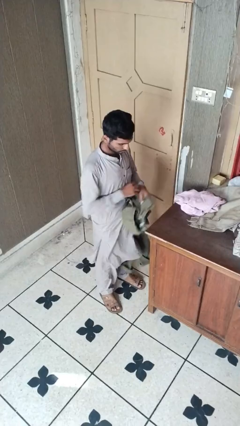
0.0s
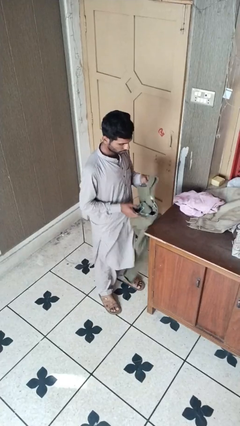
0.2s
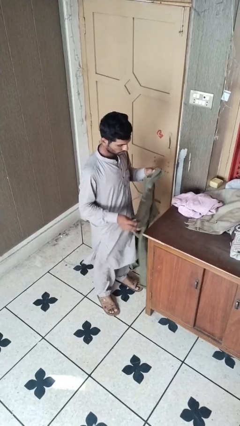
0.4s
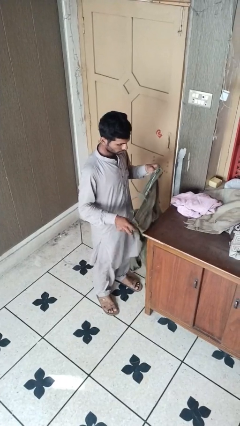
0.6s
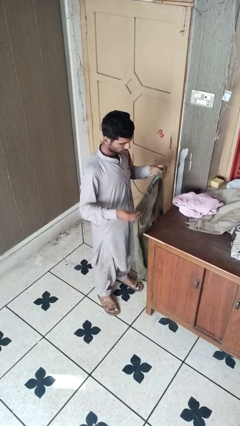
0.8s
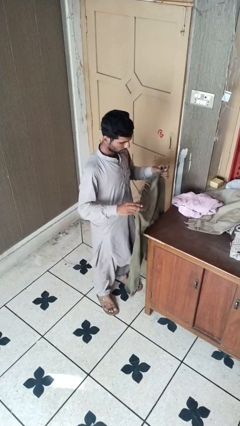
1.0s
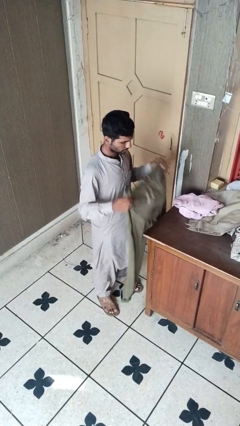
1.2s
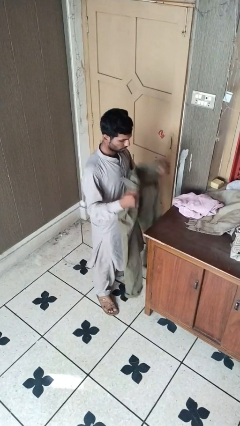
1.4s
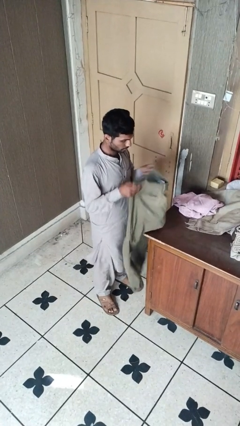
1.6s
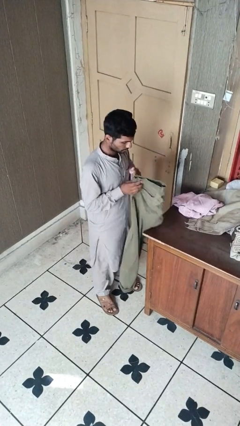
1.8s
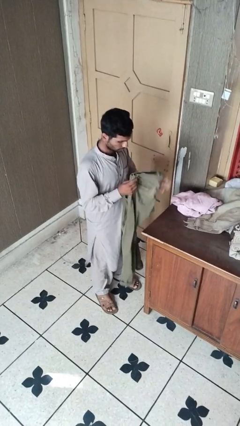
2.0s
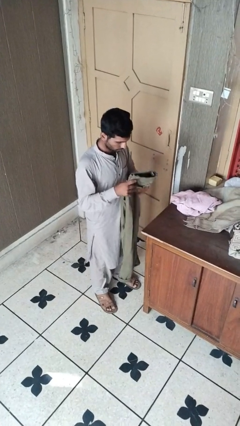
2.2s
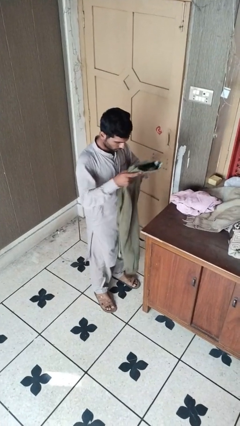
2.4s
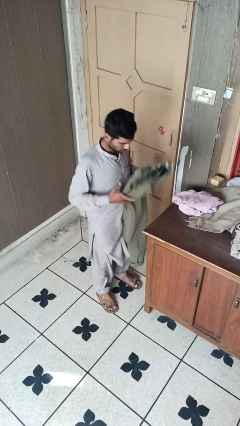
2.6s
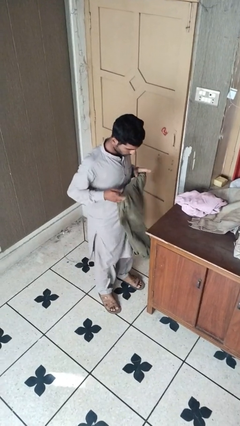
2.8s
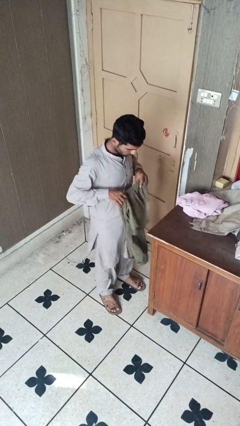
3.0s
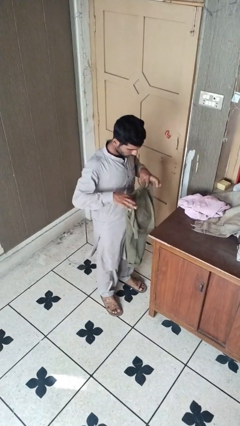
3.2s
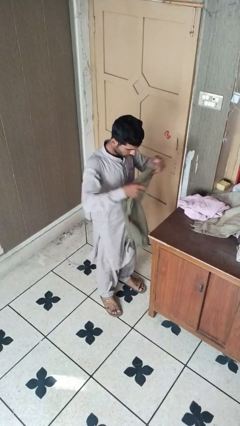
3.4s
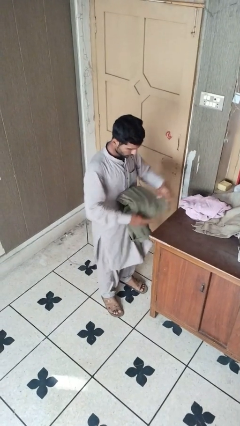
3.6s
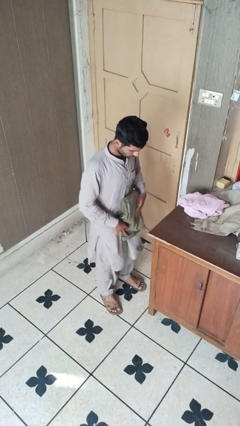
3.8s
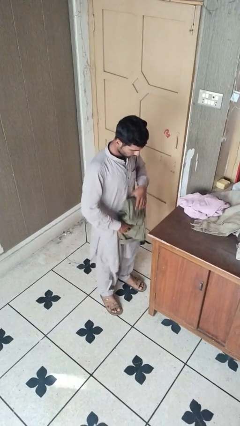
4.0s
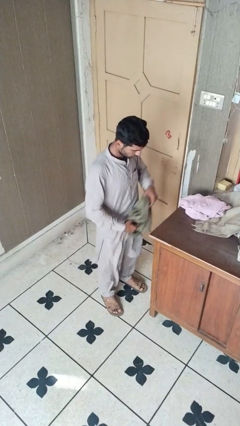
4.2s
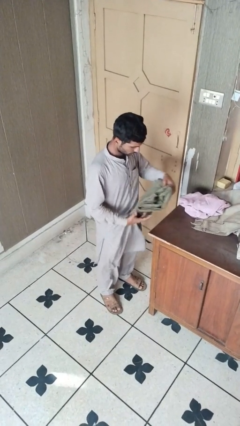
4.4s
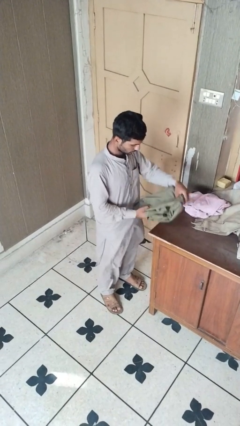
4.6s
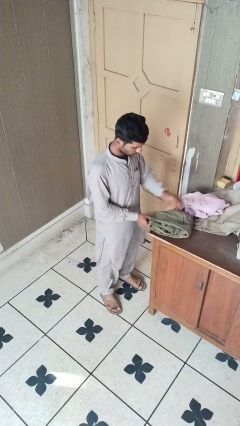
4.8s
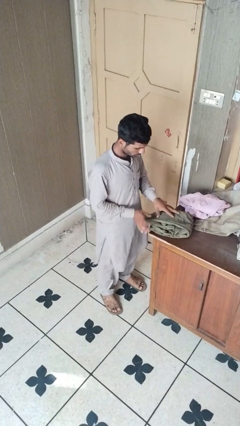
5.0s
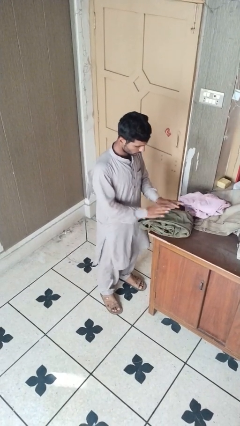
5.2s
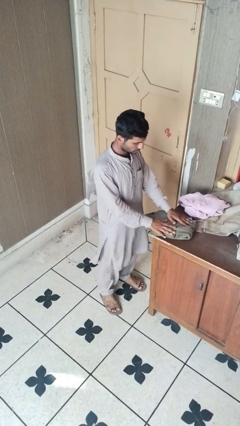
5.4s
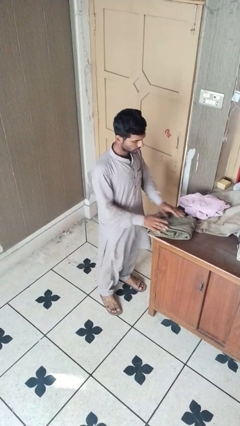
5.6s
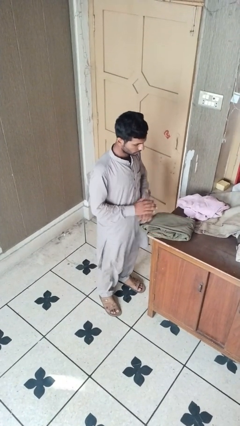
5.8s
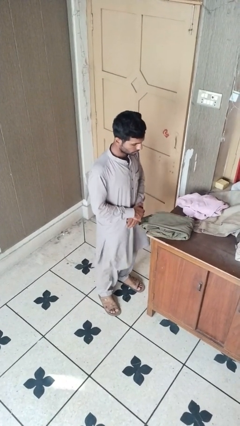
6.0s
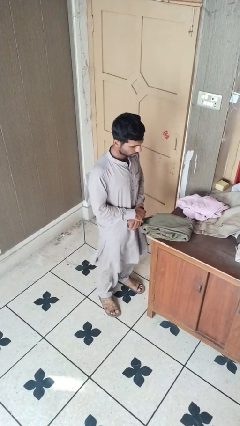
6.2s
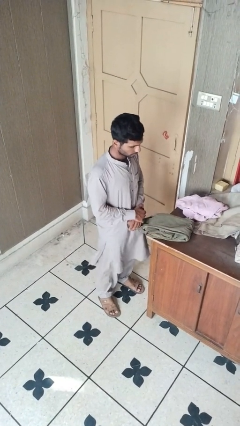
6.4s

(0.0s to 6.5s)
person folds pants

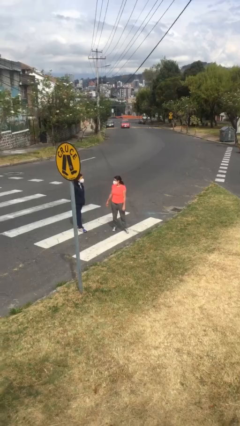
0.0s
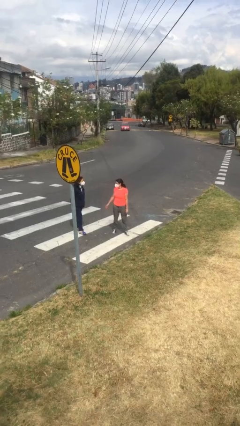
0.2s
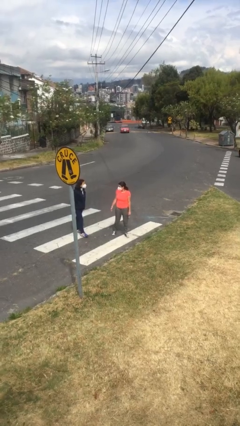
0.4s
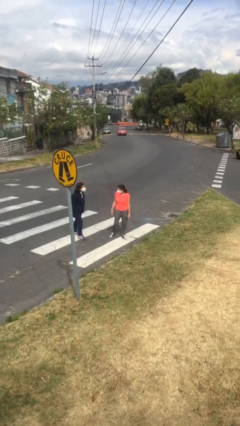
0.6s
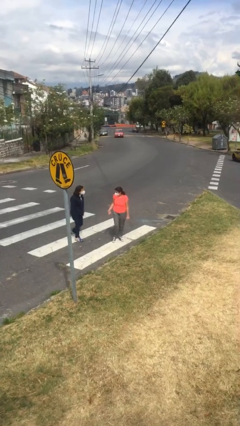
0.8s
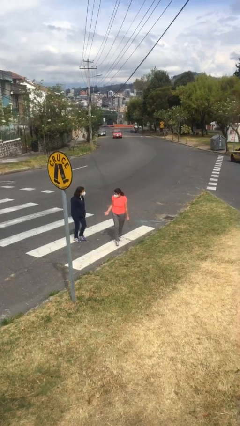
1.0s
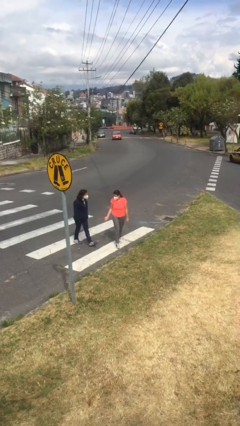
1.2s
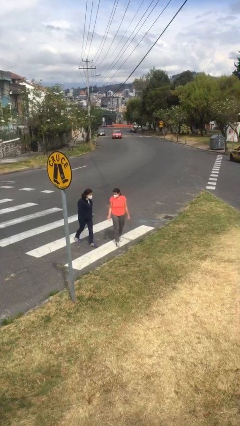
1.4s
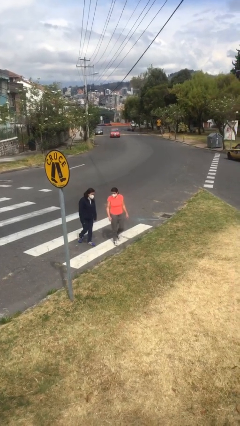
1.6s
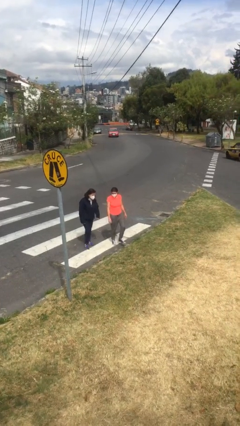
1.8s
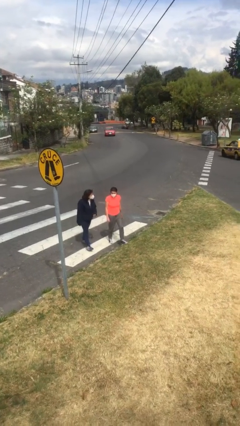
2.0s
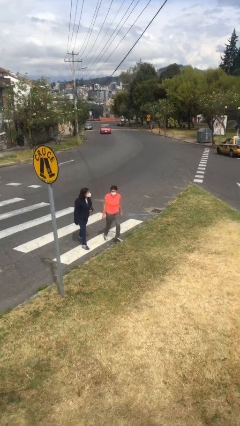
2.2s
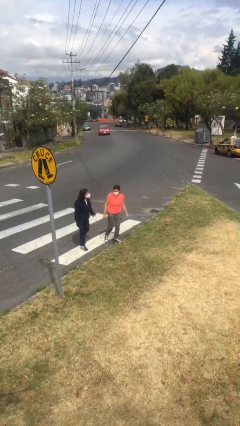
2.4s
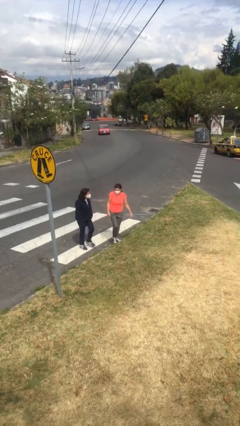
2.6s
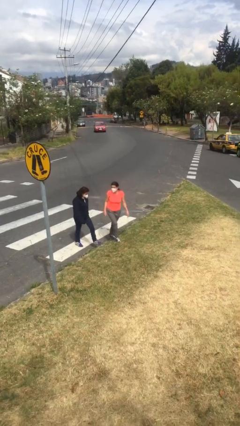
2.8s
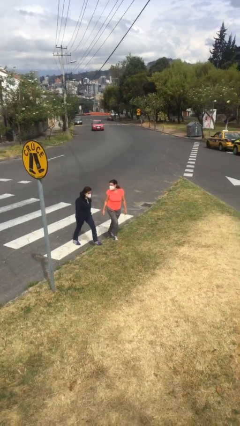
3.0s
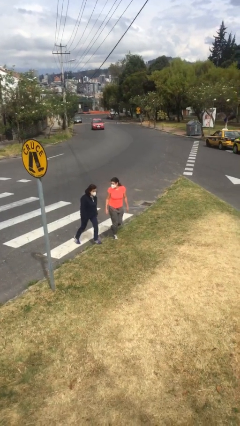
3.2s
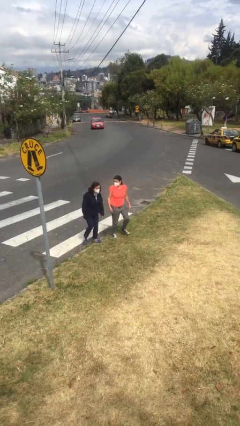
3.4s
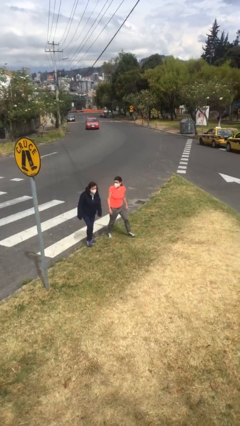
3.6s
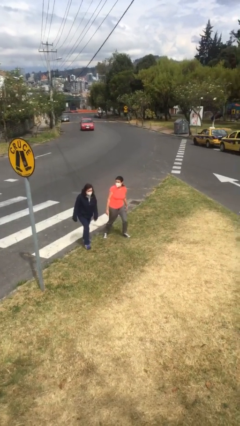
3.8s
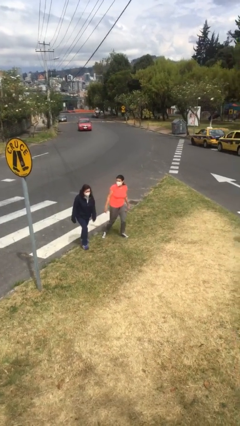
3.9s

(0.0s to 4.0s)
person talks to person

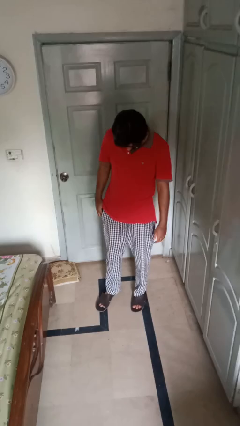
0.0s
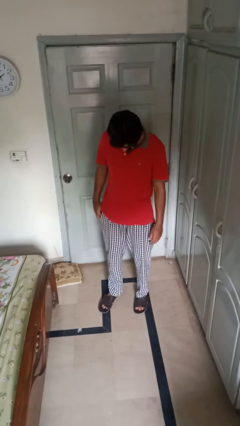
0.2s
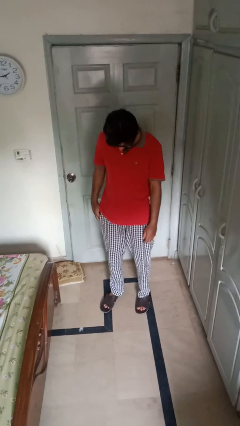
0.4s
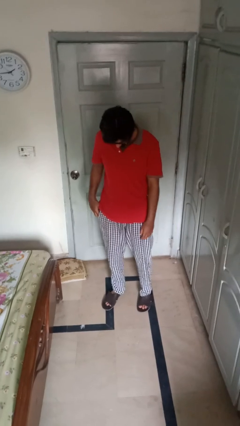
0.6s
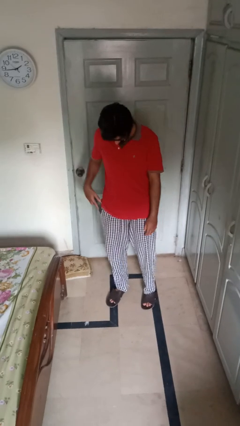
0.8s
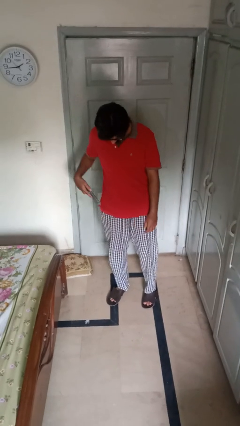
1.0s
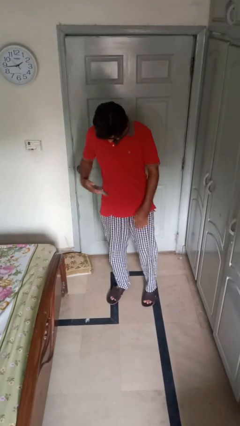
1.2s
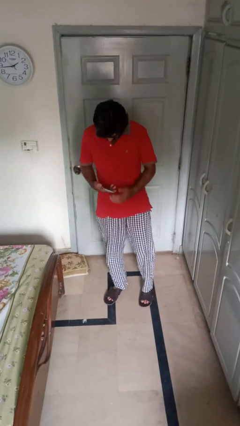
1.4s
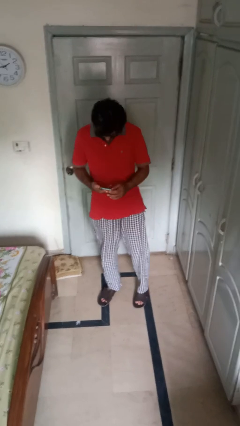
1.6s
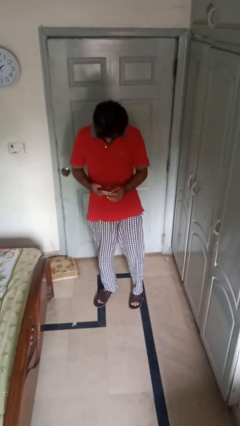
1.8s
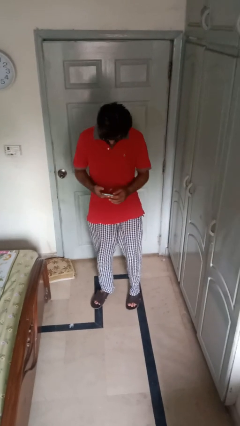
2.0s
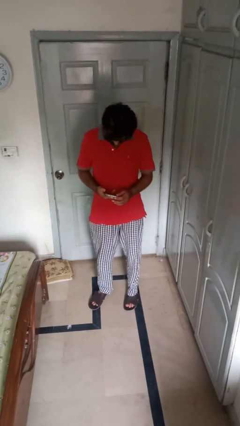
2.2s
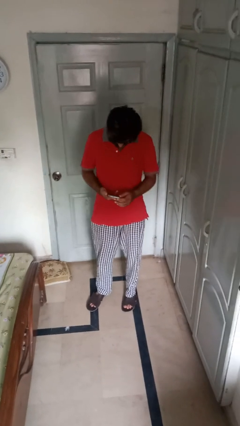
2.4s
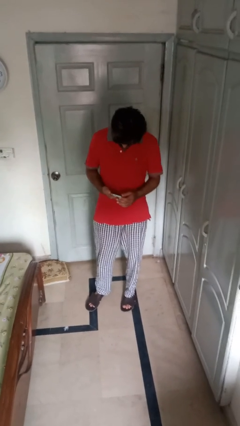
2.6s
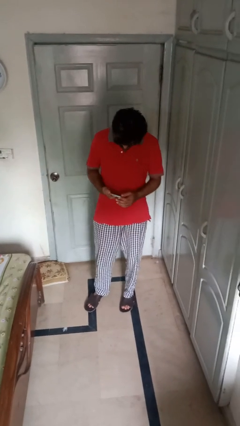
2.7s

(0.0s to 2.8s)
person takes phone from pocket

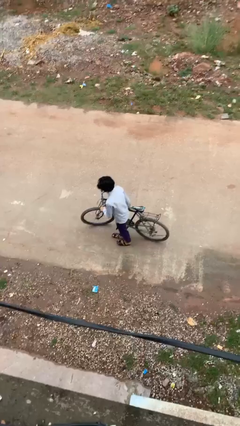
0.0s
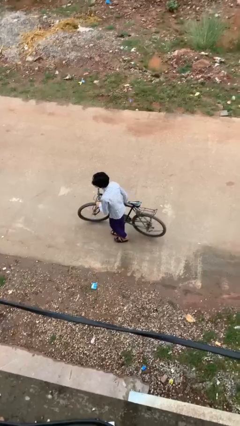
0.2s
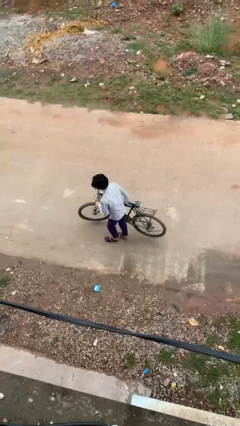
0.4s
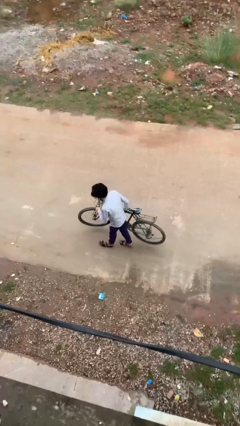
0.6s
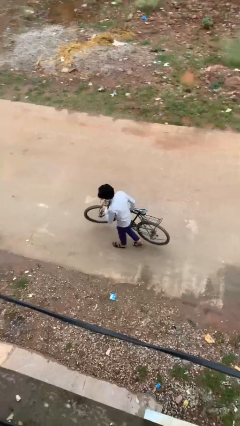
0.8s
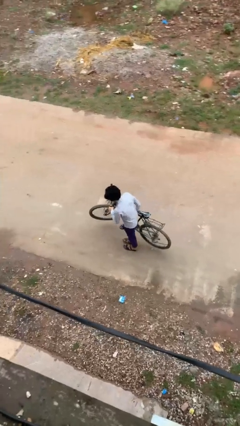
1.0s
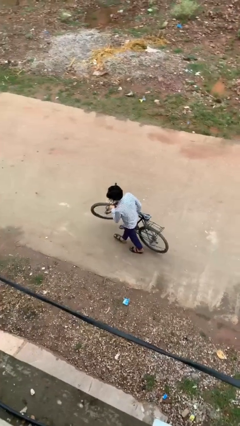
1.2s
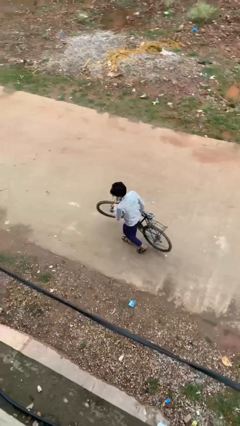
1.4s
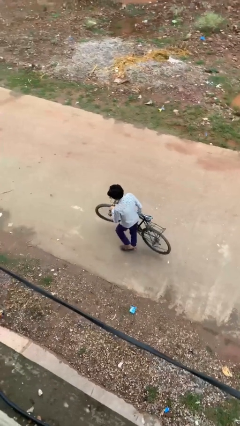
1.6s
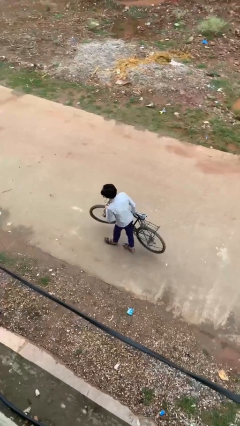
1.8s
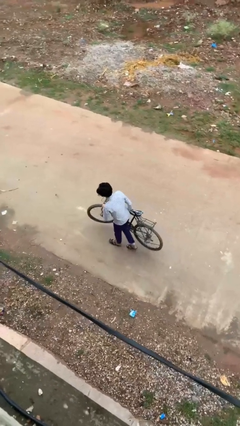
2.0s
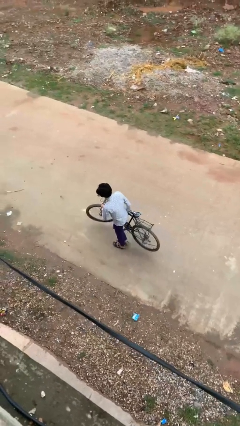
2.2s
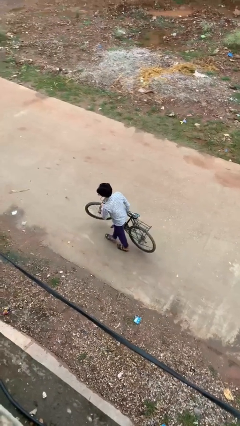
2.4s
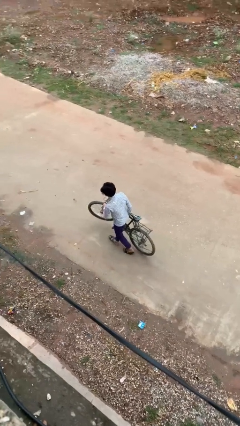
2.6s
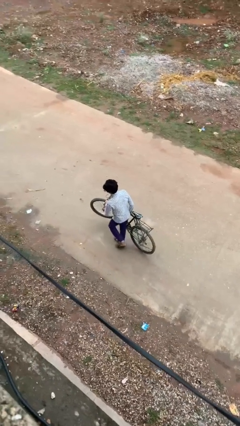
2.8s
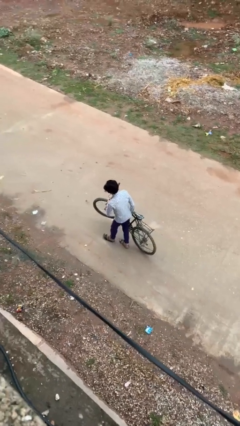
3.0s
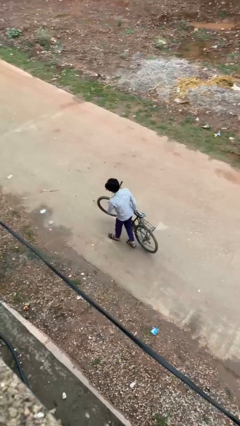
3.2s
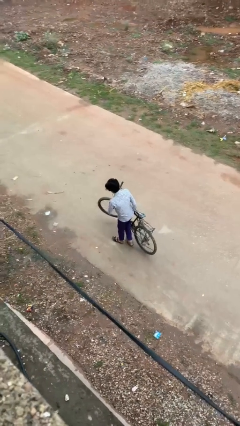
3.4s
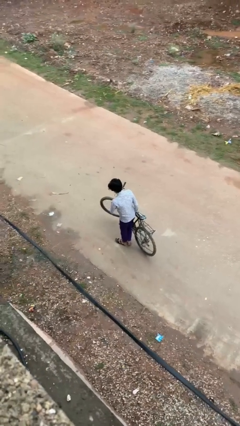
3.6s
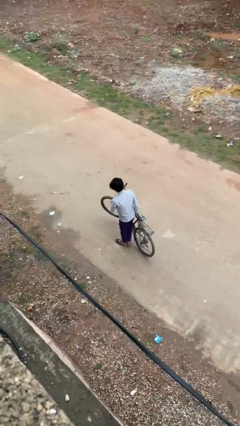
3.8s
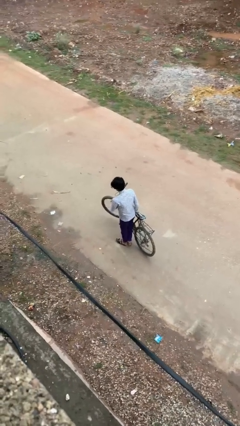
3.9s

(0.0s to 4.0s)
person carries bicycle

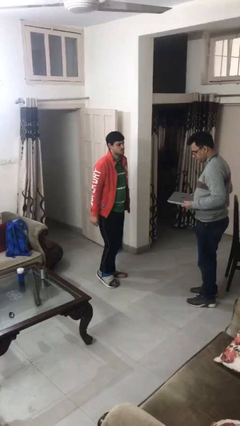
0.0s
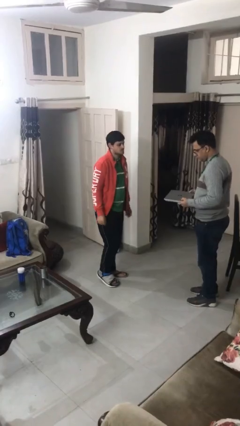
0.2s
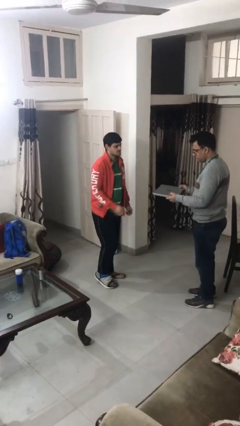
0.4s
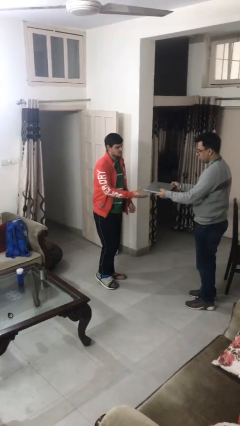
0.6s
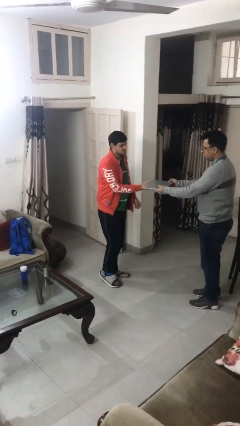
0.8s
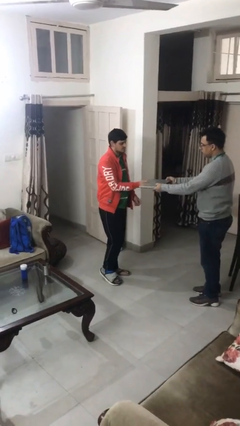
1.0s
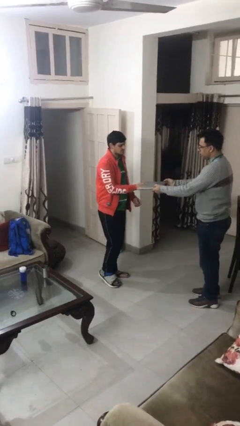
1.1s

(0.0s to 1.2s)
person transfers object to person
